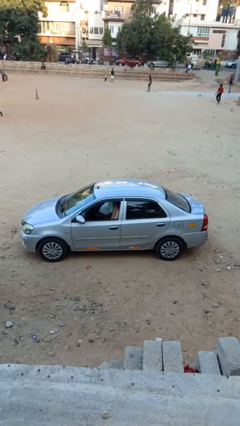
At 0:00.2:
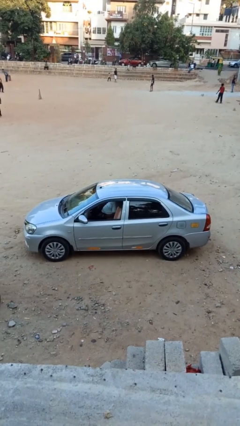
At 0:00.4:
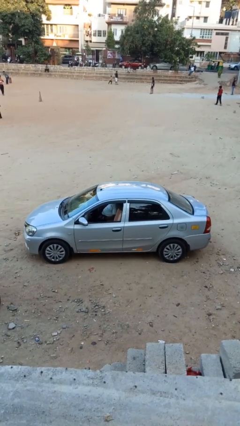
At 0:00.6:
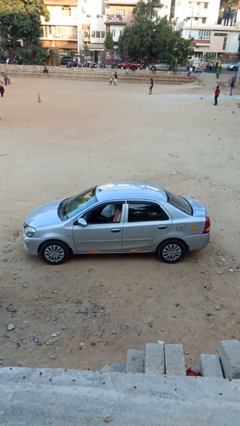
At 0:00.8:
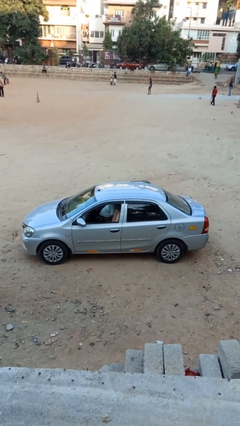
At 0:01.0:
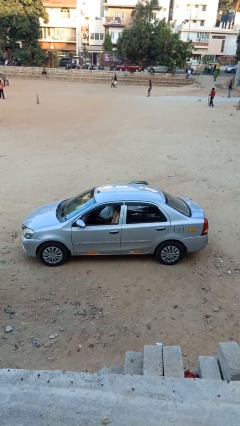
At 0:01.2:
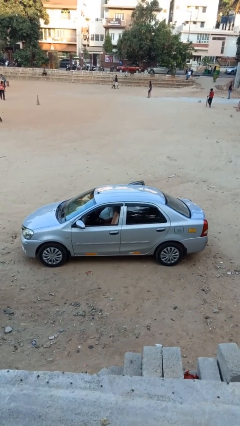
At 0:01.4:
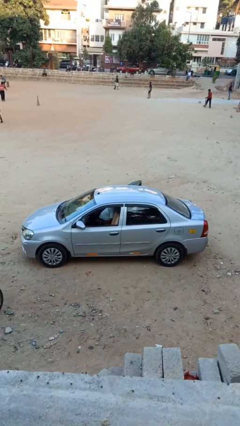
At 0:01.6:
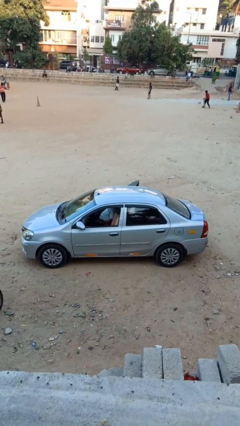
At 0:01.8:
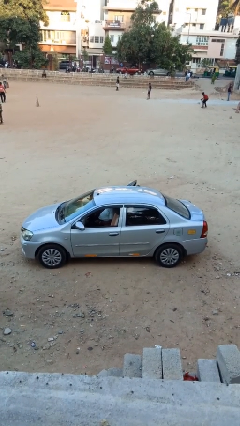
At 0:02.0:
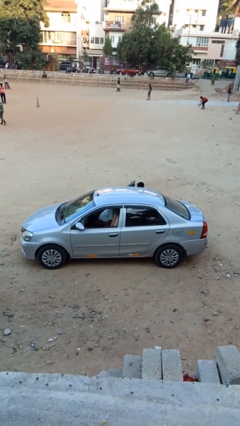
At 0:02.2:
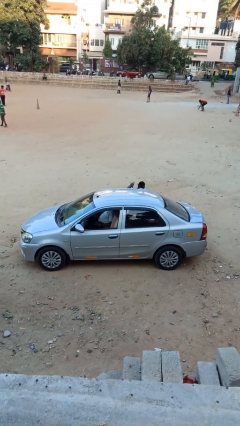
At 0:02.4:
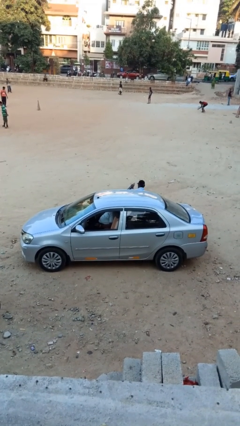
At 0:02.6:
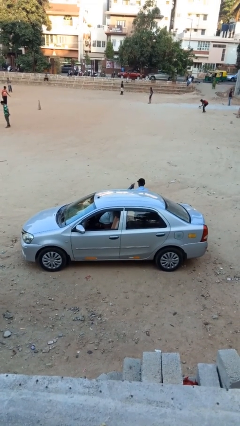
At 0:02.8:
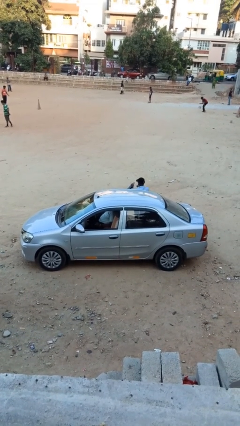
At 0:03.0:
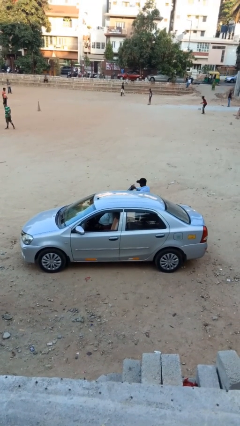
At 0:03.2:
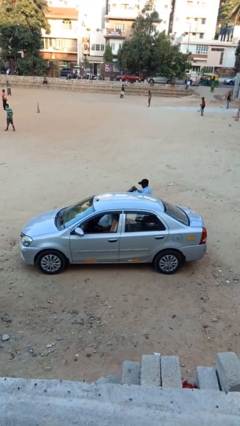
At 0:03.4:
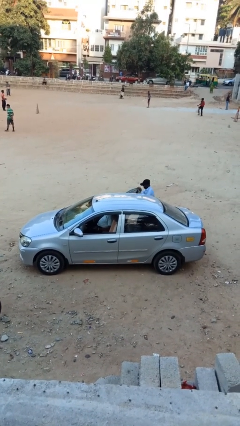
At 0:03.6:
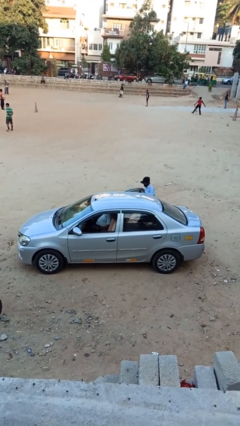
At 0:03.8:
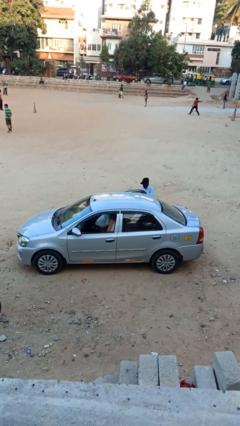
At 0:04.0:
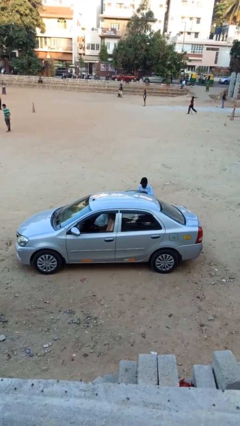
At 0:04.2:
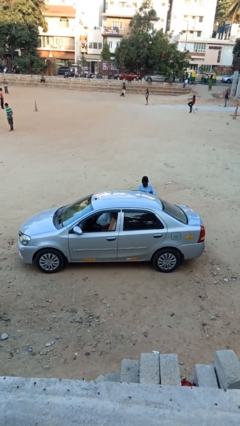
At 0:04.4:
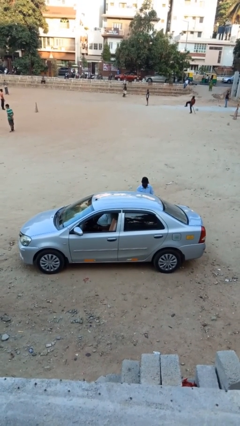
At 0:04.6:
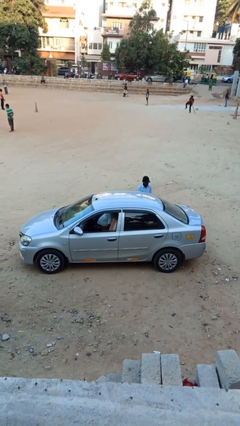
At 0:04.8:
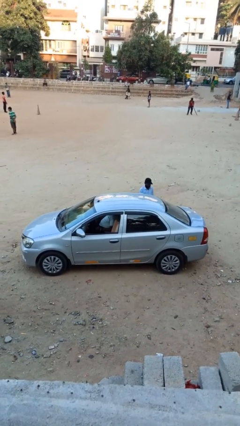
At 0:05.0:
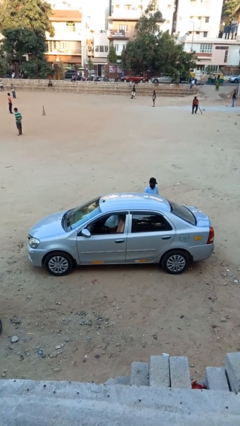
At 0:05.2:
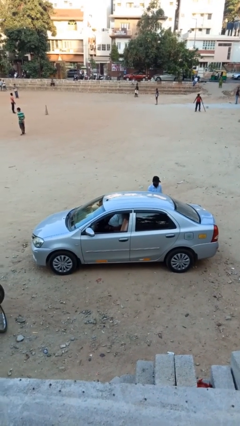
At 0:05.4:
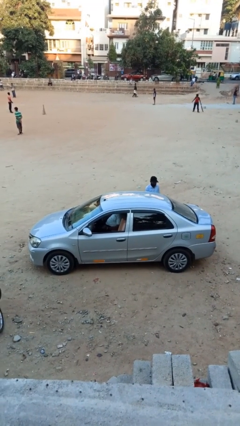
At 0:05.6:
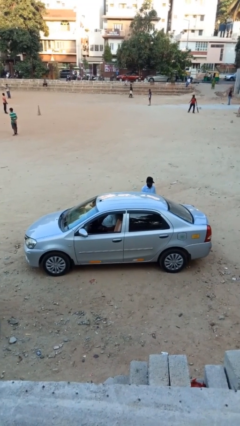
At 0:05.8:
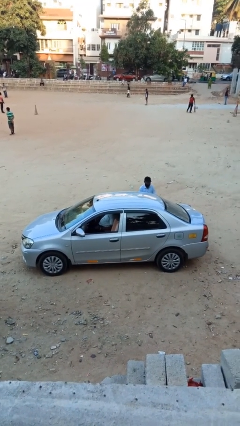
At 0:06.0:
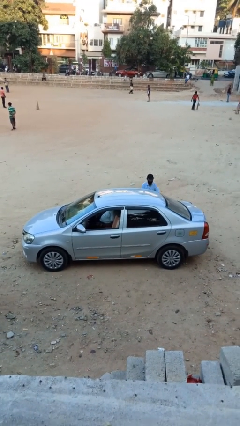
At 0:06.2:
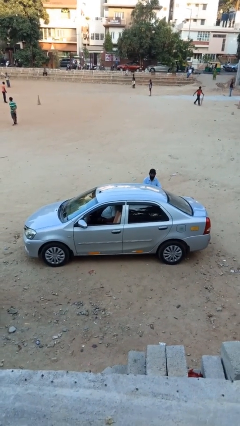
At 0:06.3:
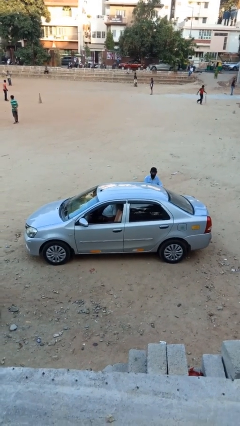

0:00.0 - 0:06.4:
car drops off person

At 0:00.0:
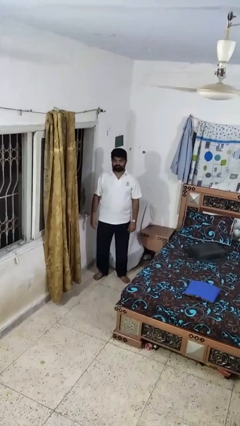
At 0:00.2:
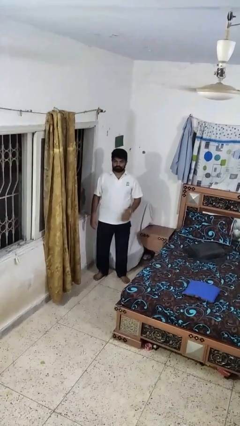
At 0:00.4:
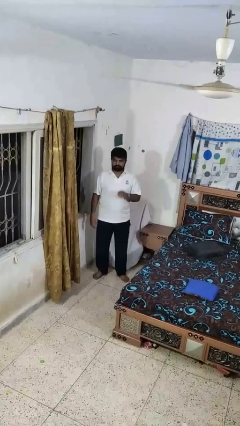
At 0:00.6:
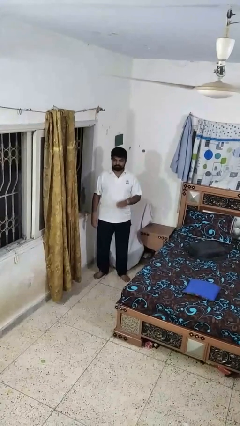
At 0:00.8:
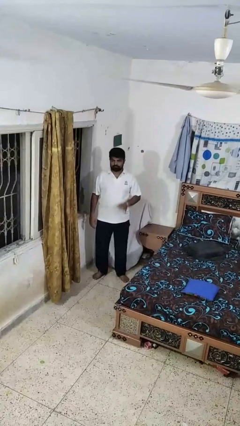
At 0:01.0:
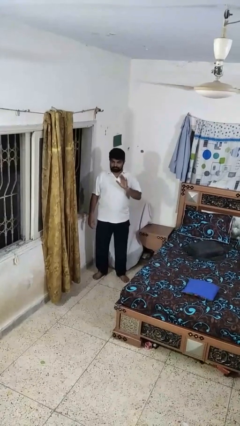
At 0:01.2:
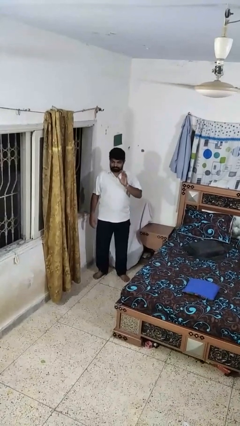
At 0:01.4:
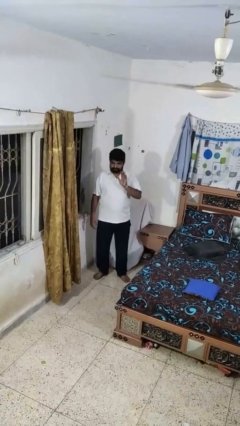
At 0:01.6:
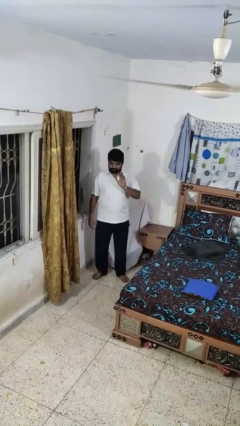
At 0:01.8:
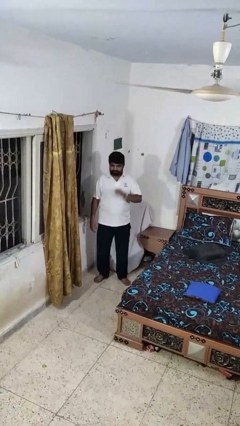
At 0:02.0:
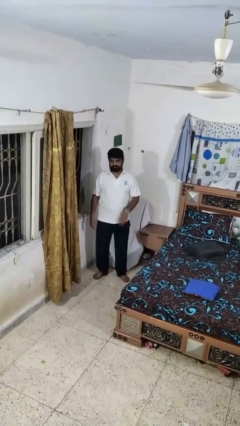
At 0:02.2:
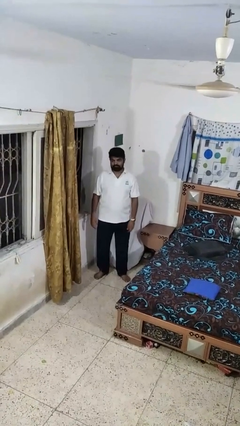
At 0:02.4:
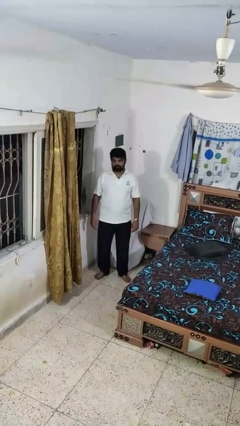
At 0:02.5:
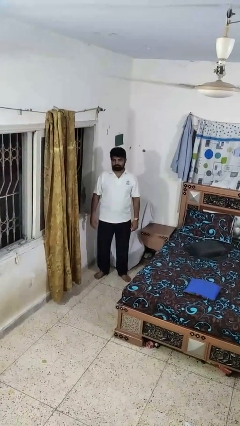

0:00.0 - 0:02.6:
person waves at person

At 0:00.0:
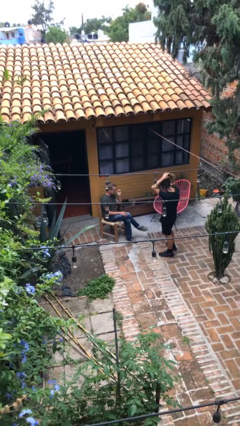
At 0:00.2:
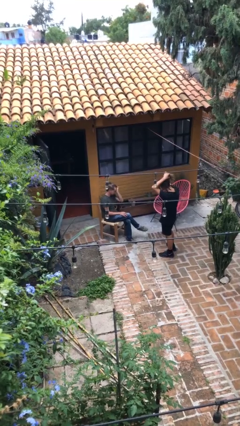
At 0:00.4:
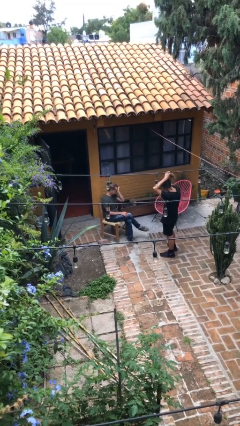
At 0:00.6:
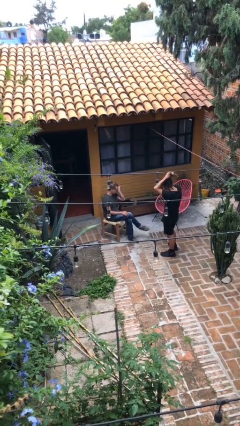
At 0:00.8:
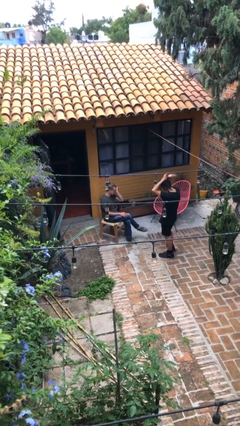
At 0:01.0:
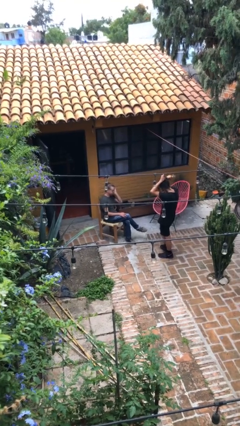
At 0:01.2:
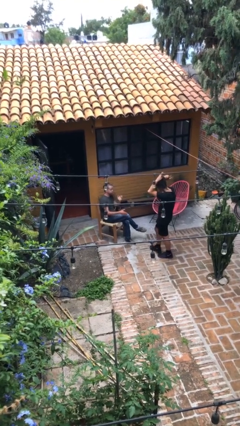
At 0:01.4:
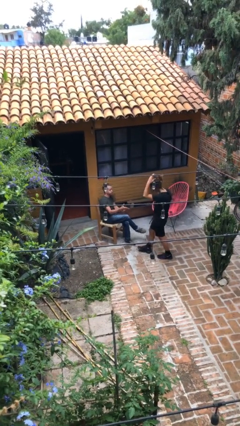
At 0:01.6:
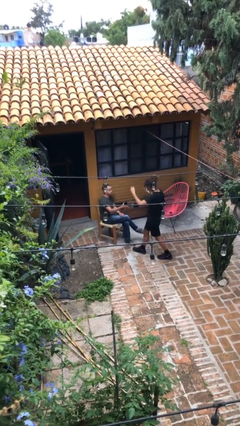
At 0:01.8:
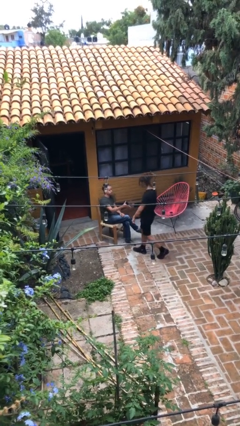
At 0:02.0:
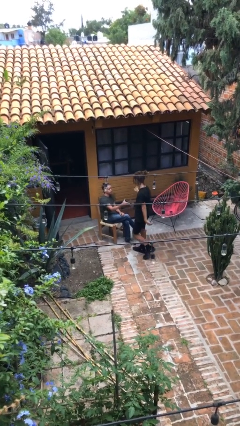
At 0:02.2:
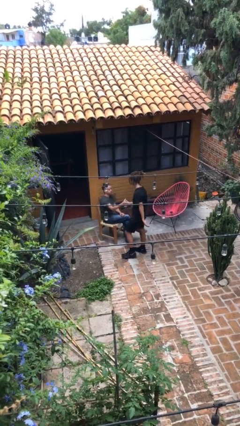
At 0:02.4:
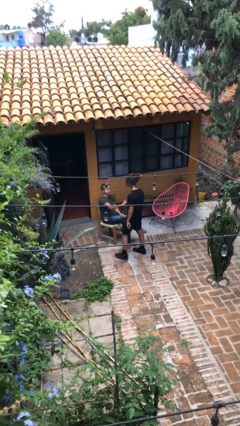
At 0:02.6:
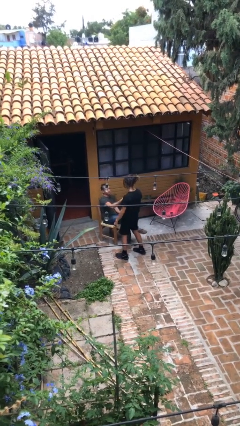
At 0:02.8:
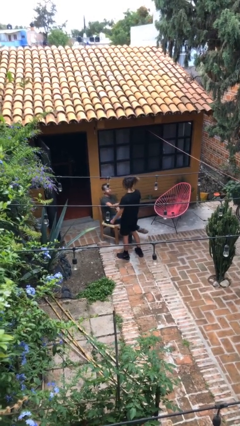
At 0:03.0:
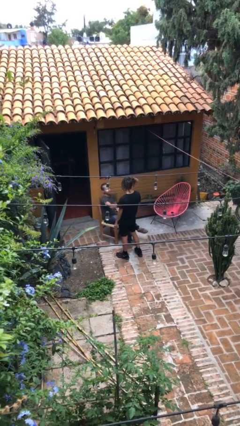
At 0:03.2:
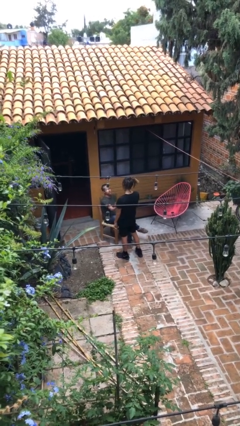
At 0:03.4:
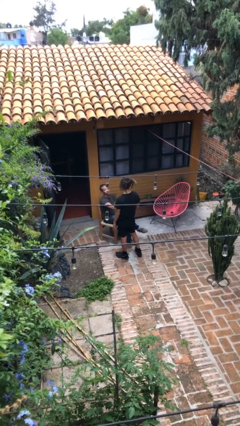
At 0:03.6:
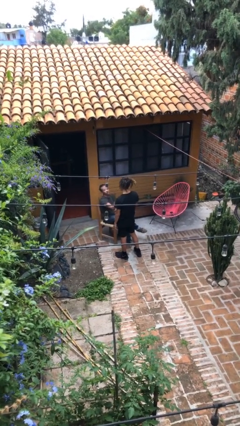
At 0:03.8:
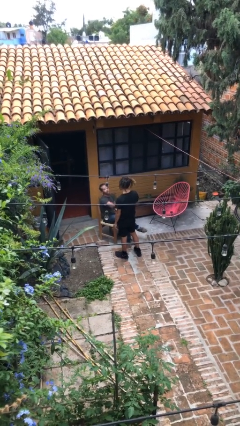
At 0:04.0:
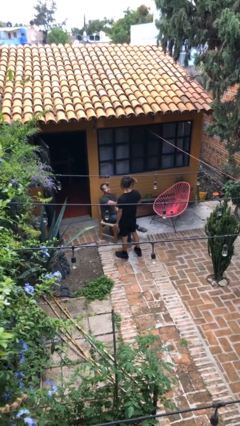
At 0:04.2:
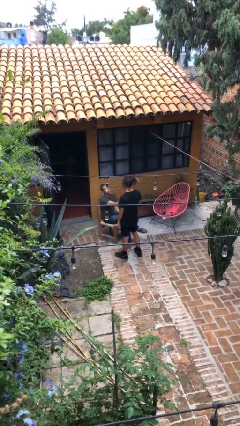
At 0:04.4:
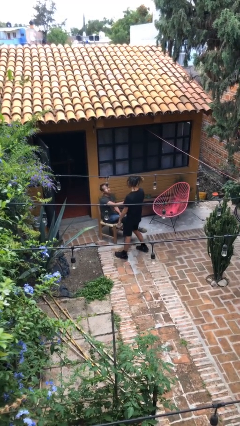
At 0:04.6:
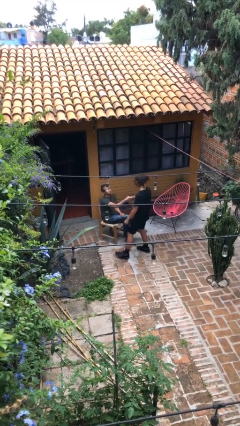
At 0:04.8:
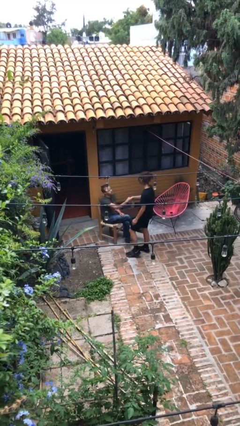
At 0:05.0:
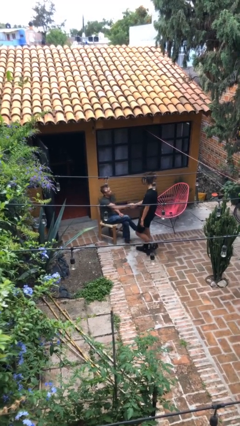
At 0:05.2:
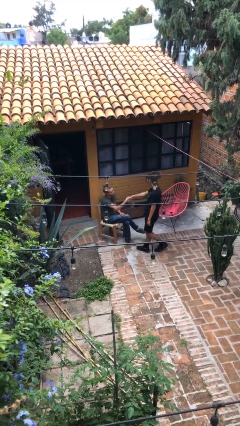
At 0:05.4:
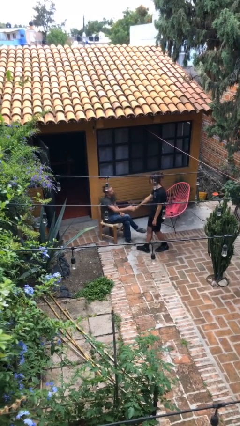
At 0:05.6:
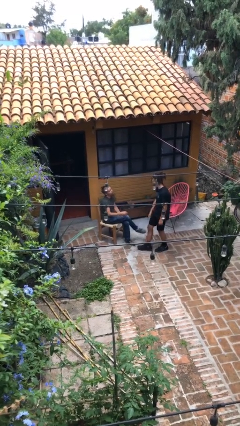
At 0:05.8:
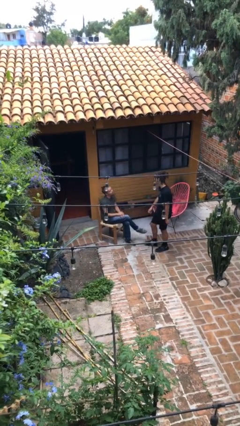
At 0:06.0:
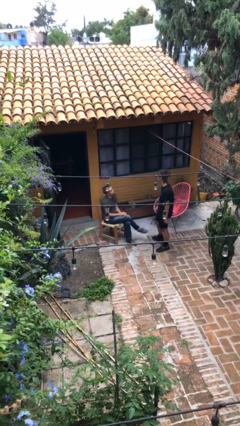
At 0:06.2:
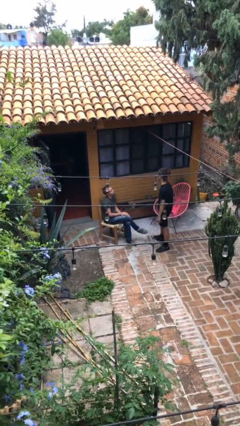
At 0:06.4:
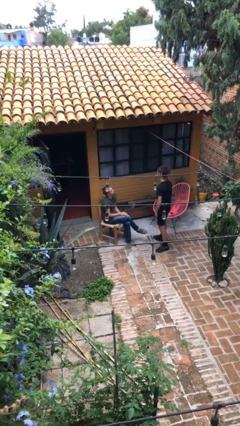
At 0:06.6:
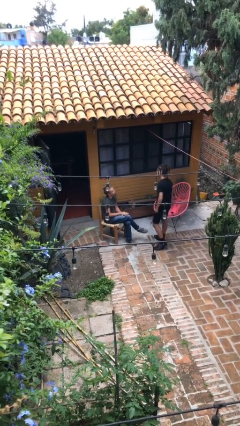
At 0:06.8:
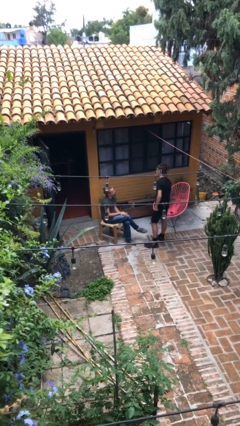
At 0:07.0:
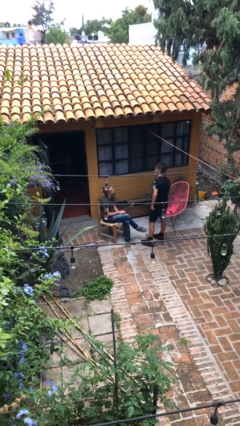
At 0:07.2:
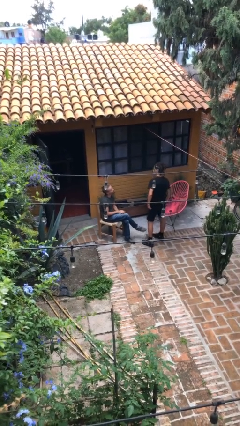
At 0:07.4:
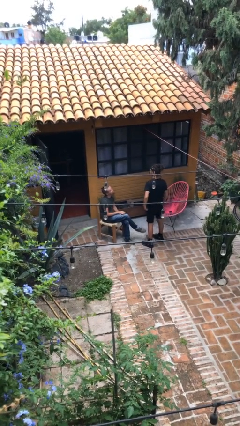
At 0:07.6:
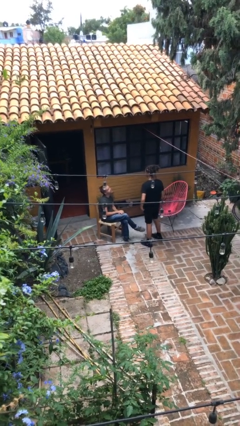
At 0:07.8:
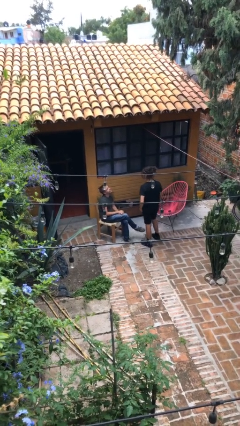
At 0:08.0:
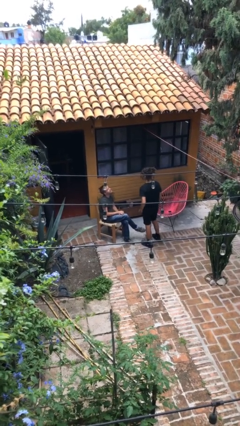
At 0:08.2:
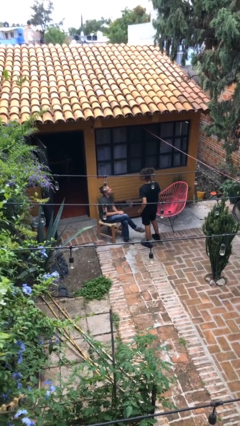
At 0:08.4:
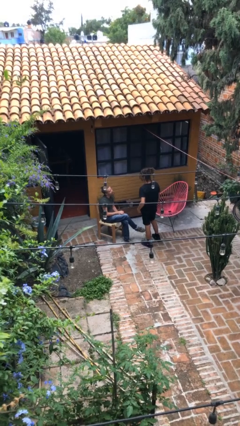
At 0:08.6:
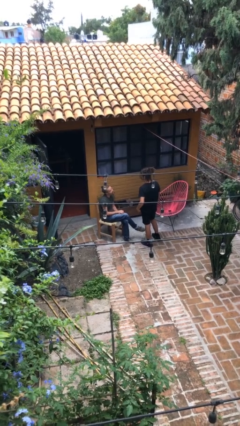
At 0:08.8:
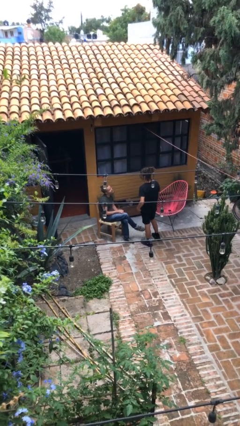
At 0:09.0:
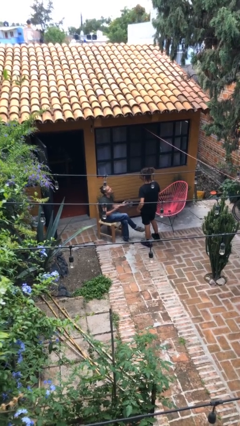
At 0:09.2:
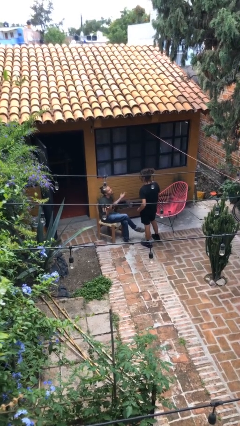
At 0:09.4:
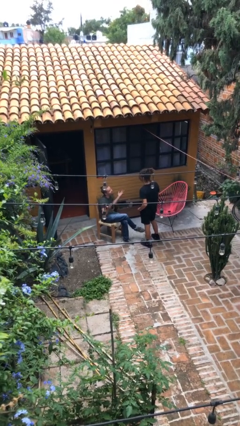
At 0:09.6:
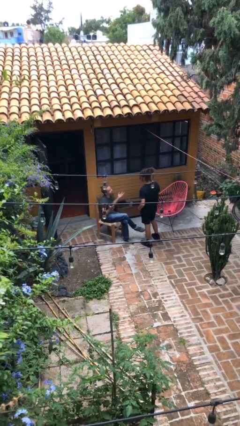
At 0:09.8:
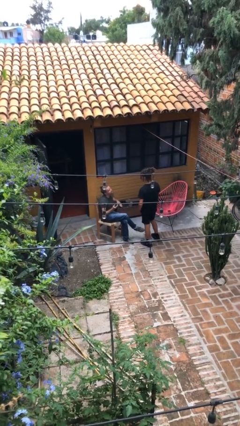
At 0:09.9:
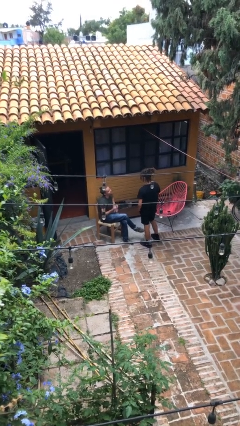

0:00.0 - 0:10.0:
person shakes hand
